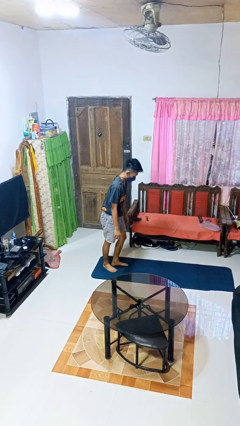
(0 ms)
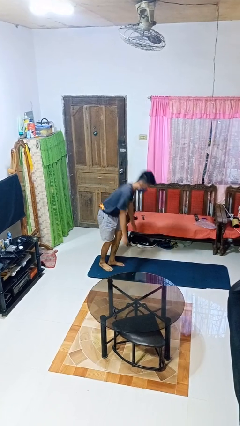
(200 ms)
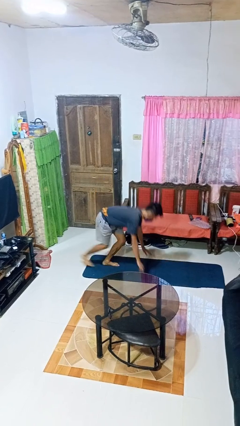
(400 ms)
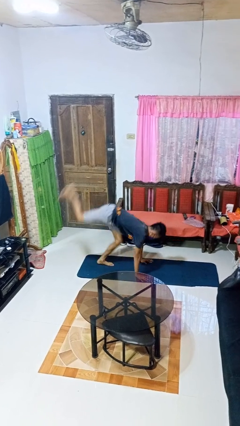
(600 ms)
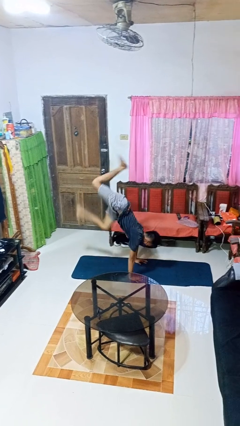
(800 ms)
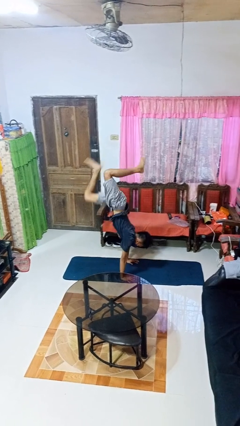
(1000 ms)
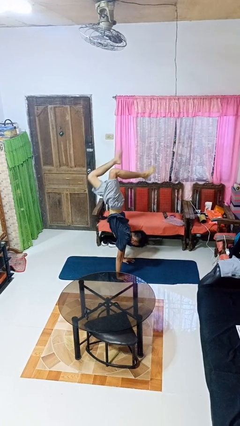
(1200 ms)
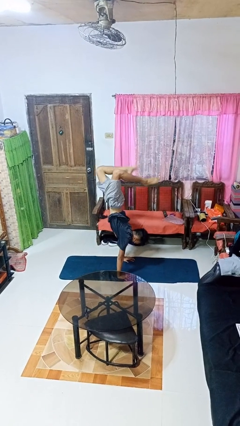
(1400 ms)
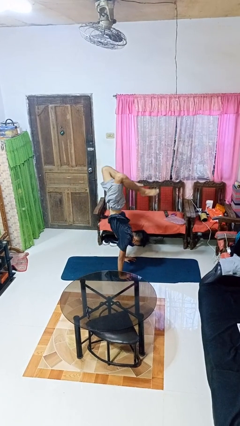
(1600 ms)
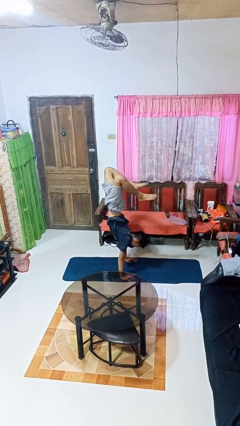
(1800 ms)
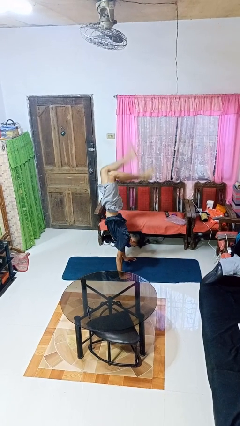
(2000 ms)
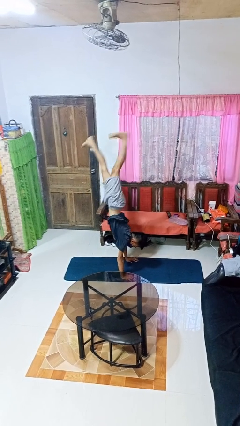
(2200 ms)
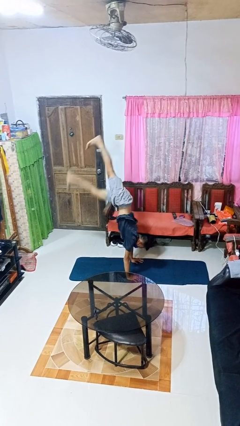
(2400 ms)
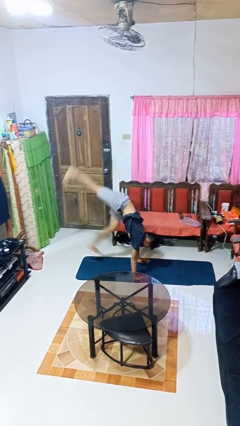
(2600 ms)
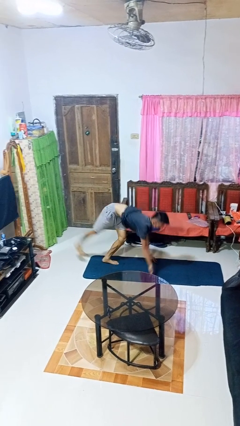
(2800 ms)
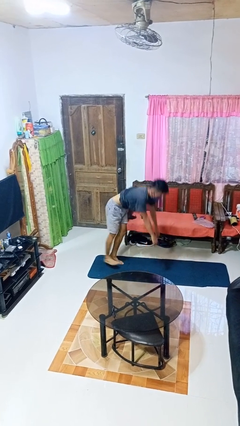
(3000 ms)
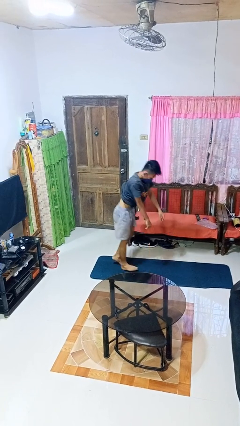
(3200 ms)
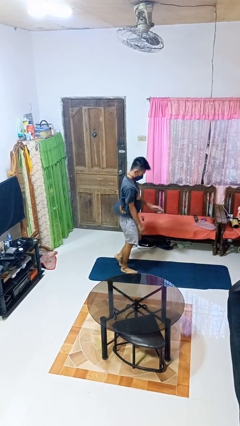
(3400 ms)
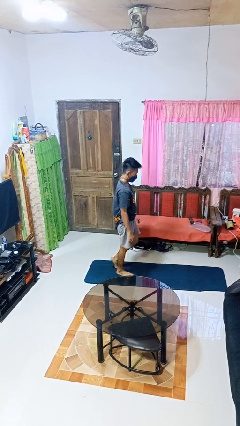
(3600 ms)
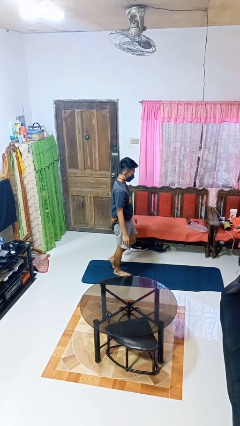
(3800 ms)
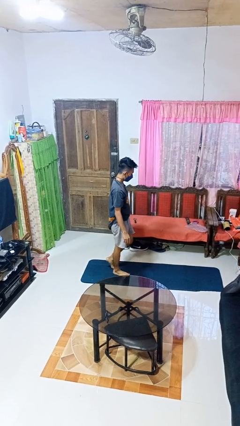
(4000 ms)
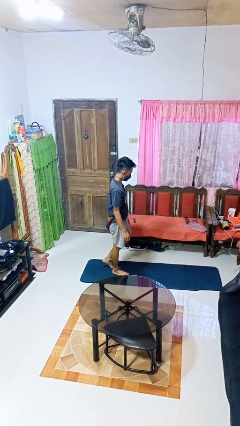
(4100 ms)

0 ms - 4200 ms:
person handstand

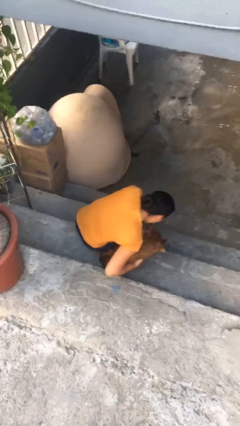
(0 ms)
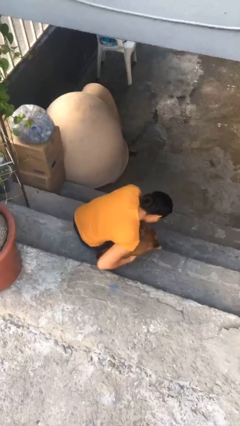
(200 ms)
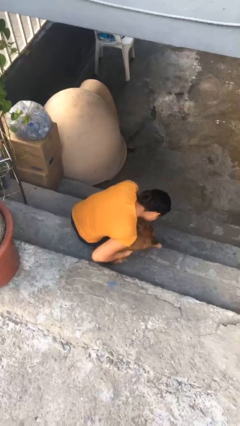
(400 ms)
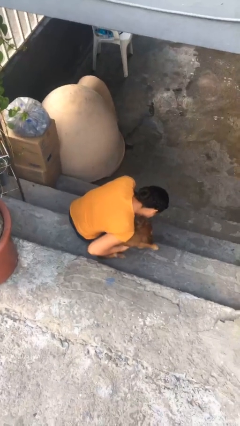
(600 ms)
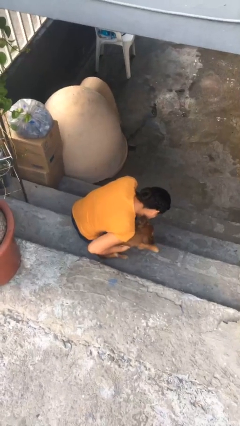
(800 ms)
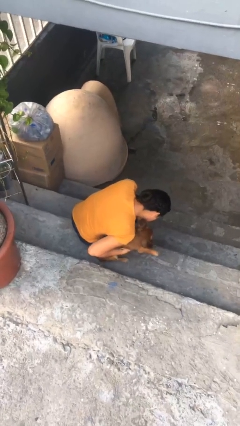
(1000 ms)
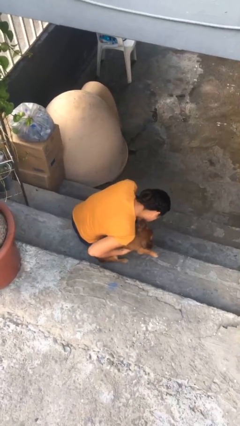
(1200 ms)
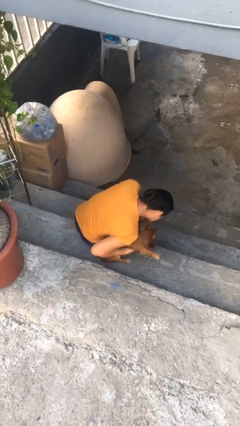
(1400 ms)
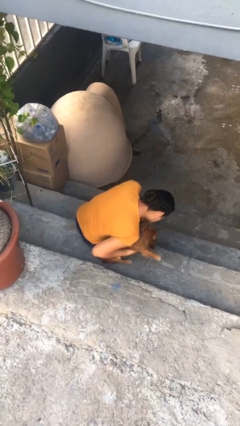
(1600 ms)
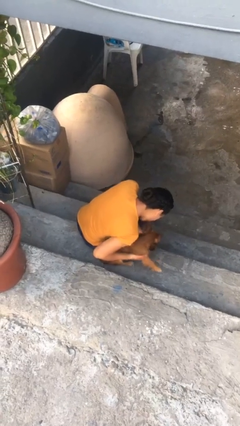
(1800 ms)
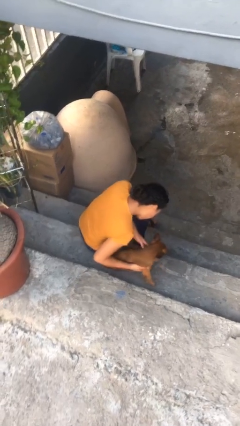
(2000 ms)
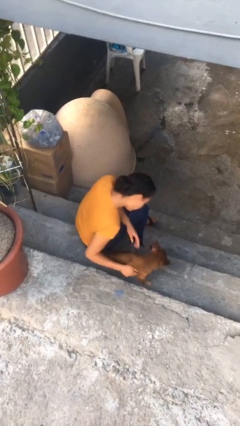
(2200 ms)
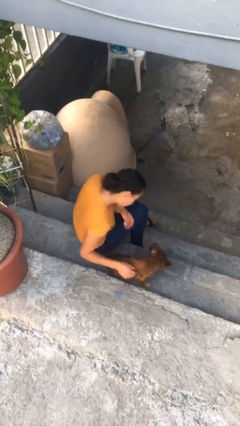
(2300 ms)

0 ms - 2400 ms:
person hugs dog

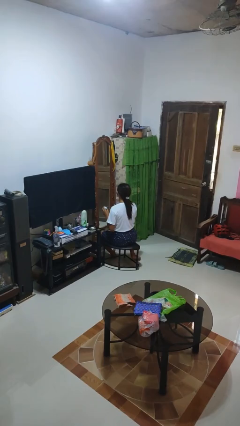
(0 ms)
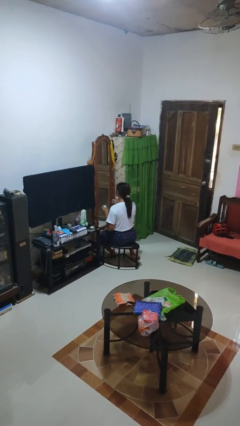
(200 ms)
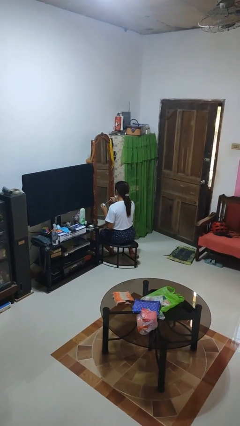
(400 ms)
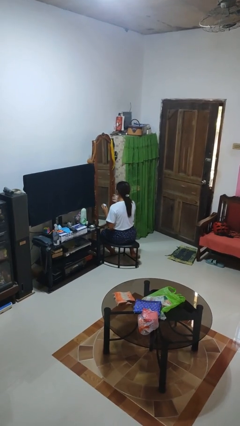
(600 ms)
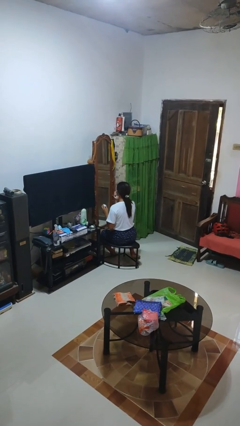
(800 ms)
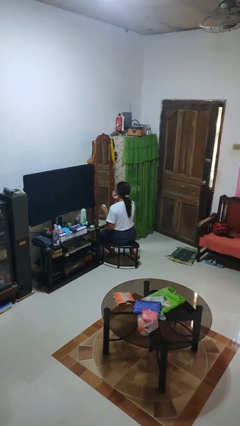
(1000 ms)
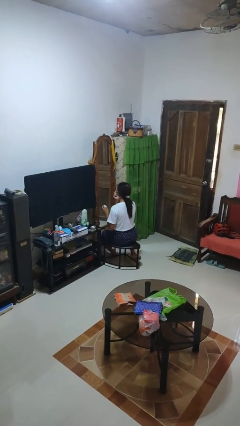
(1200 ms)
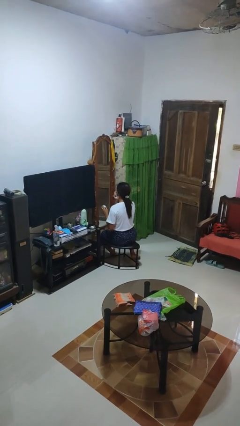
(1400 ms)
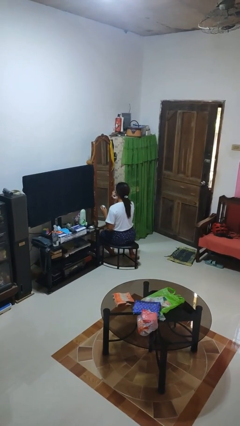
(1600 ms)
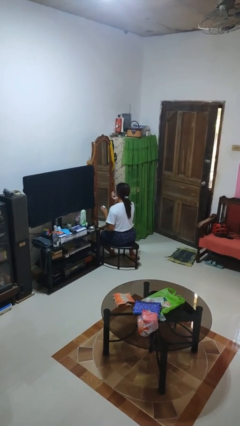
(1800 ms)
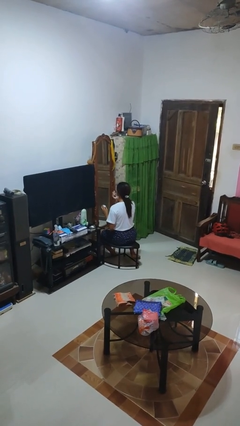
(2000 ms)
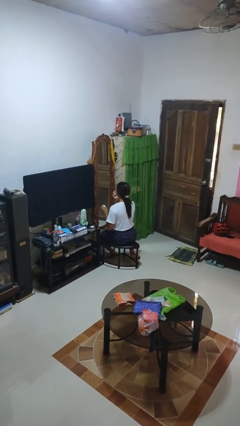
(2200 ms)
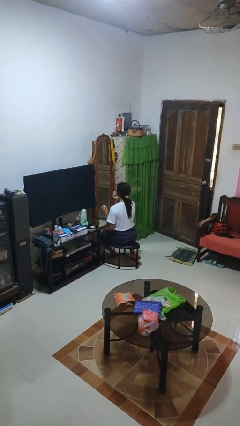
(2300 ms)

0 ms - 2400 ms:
person applies eye makeup

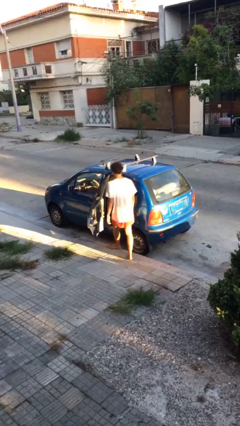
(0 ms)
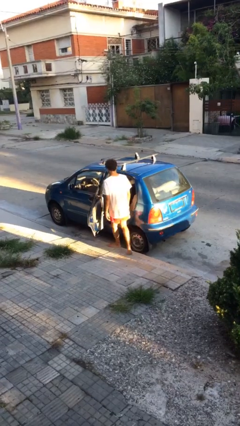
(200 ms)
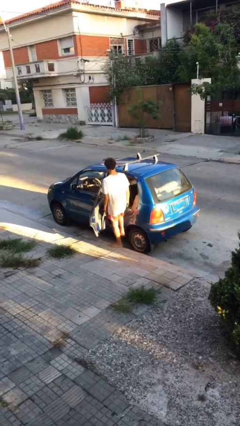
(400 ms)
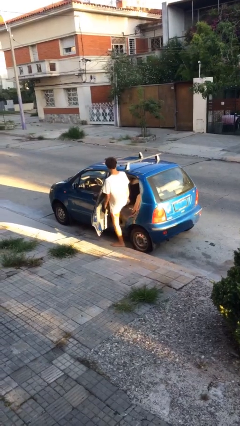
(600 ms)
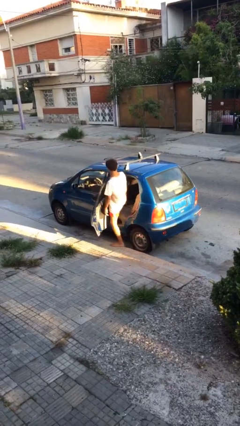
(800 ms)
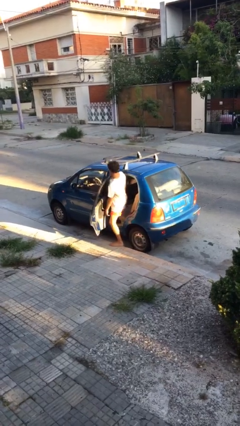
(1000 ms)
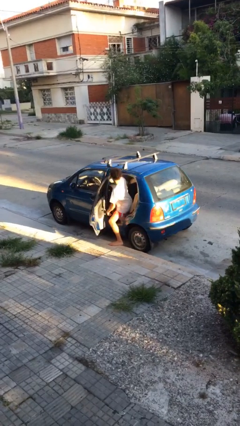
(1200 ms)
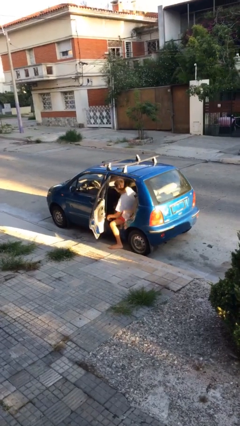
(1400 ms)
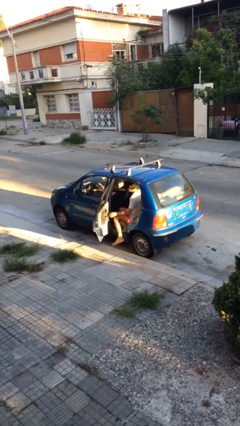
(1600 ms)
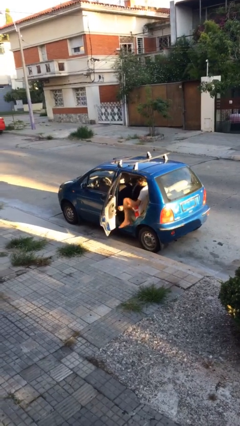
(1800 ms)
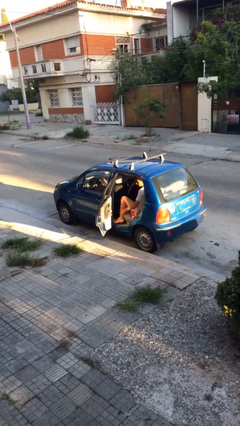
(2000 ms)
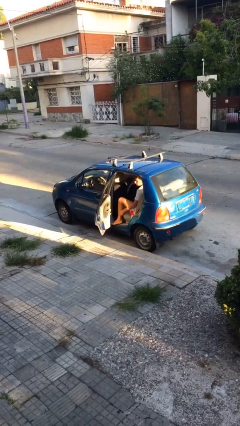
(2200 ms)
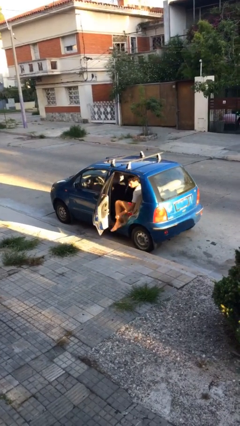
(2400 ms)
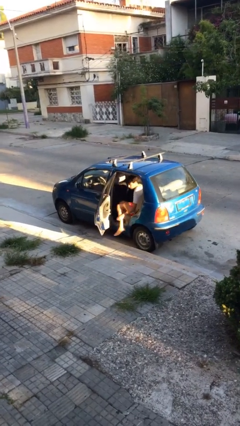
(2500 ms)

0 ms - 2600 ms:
person enters car

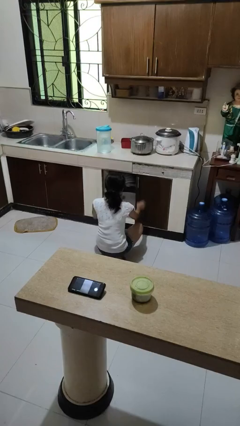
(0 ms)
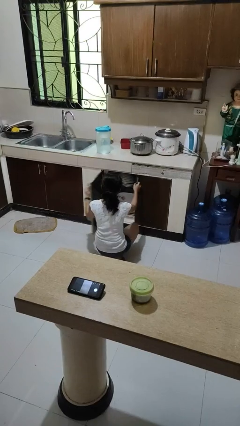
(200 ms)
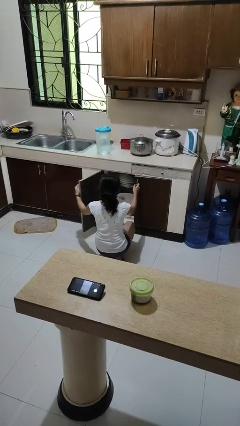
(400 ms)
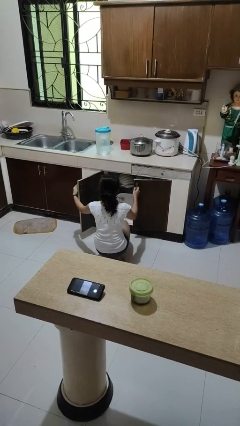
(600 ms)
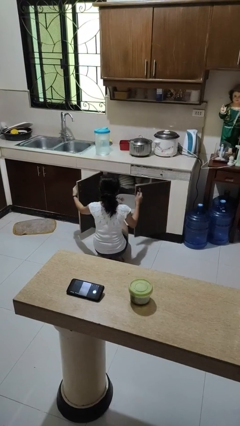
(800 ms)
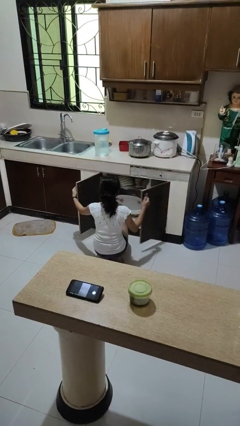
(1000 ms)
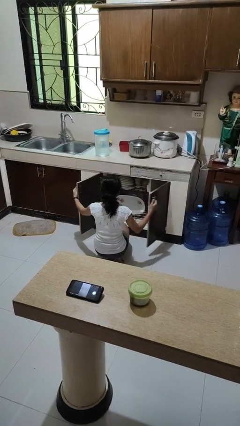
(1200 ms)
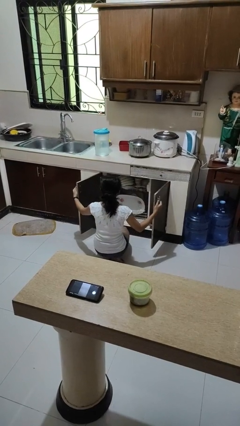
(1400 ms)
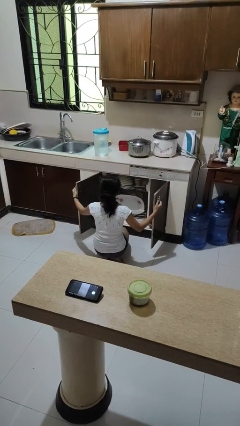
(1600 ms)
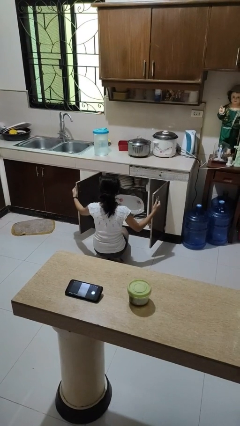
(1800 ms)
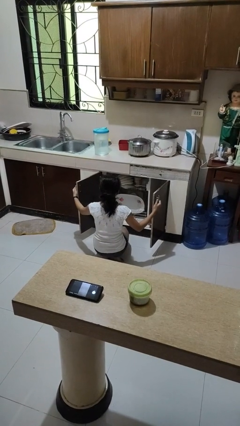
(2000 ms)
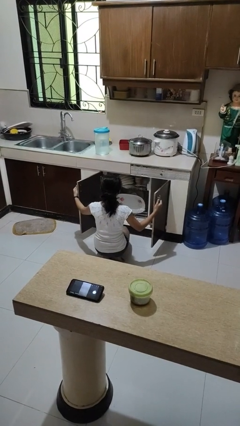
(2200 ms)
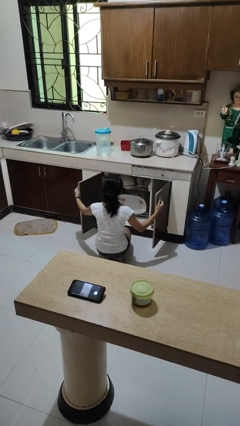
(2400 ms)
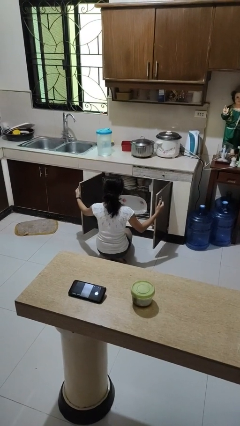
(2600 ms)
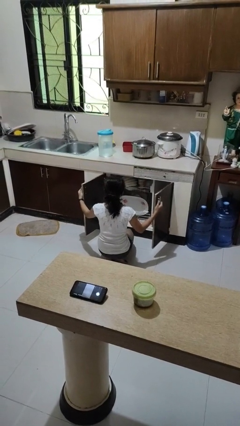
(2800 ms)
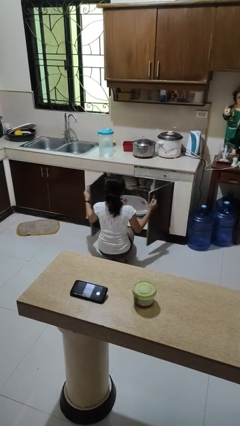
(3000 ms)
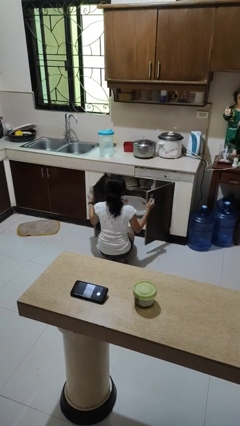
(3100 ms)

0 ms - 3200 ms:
person opens dishwasher

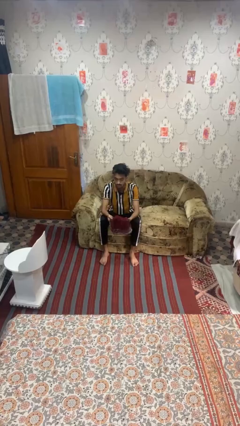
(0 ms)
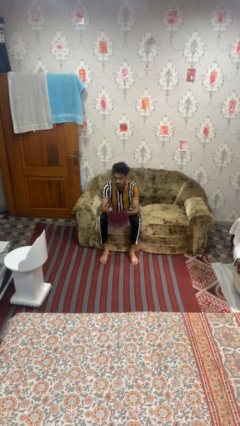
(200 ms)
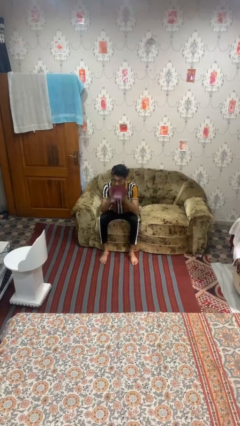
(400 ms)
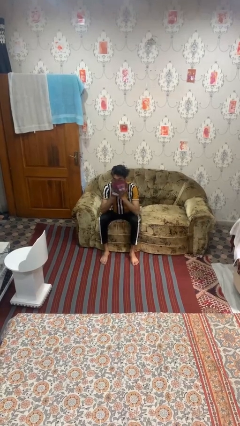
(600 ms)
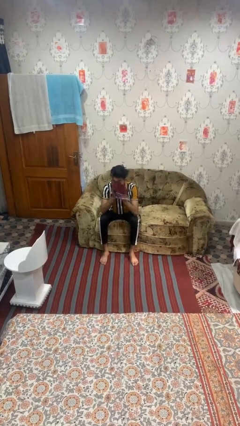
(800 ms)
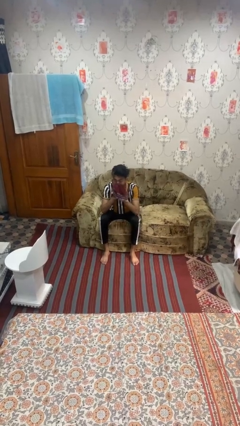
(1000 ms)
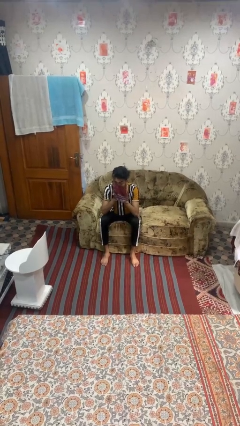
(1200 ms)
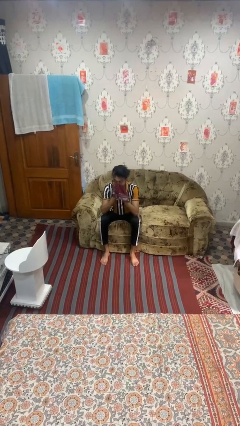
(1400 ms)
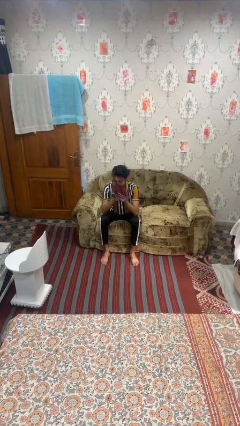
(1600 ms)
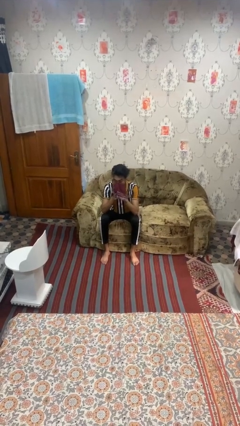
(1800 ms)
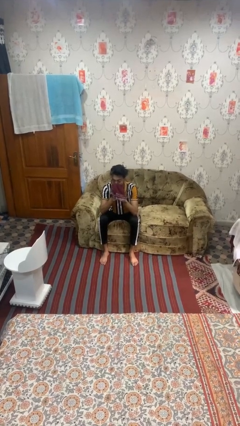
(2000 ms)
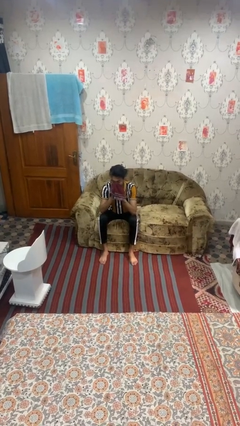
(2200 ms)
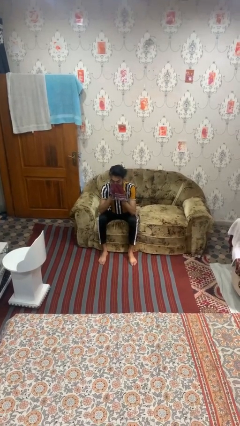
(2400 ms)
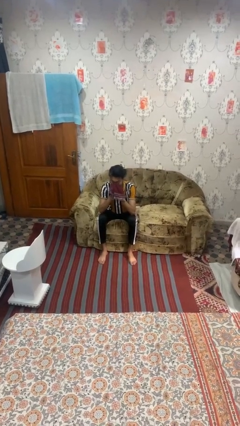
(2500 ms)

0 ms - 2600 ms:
person blows nose
